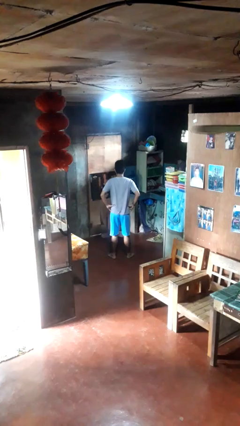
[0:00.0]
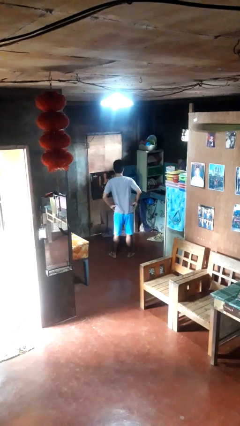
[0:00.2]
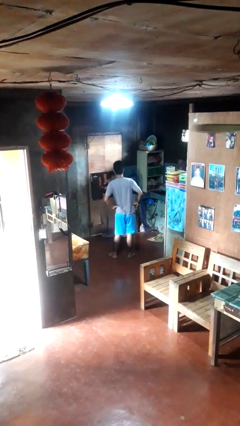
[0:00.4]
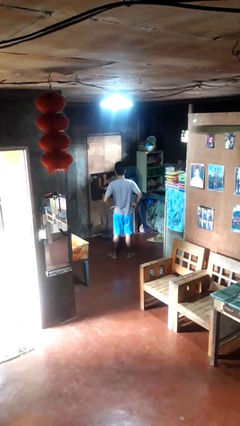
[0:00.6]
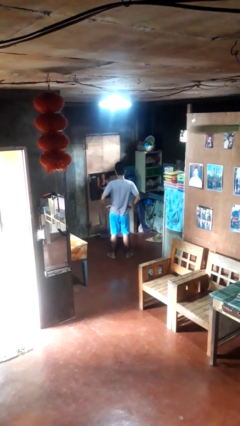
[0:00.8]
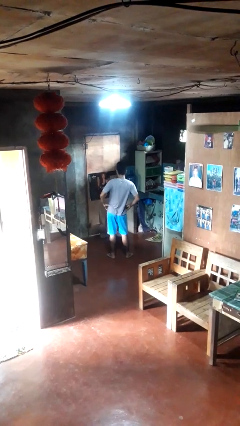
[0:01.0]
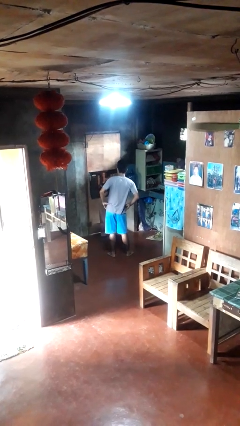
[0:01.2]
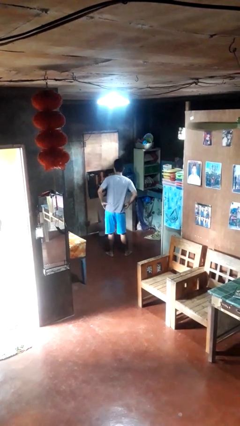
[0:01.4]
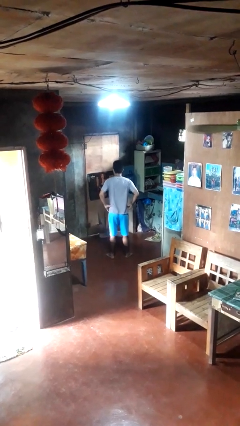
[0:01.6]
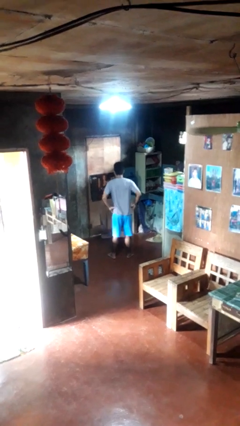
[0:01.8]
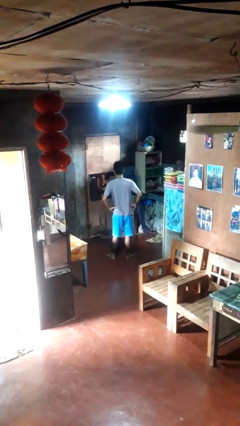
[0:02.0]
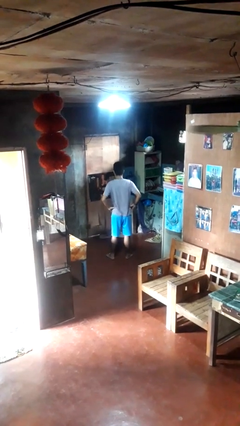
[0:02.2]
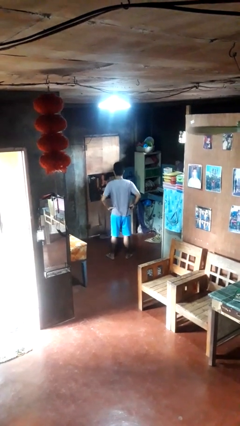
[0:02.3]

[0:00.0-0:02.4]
person wiggles hips

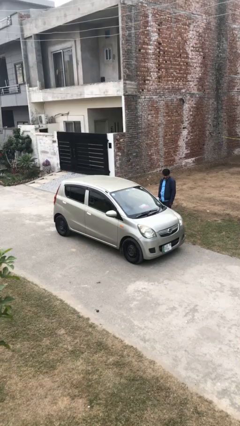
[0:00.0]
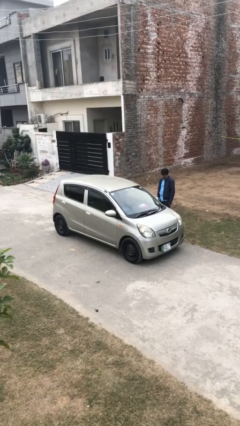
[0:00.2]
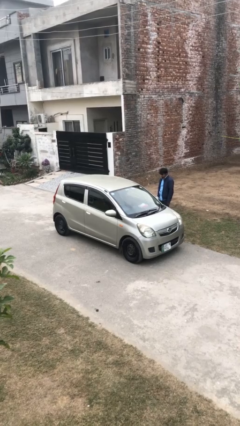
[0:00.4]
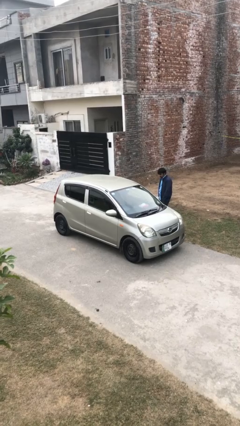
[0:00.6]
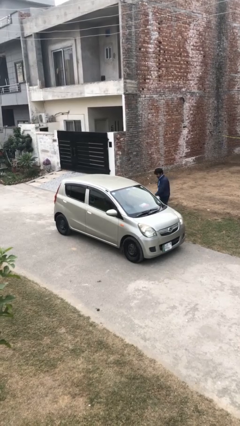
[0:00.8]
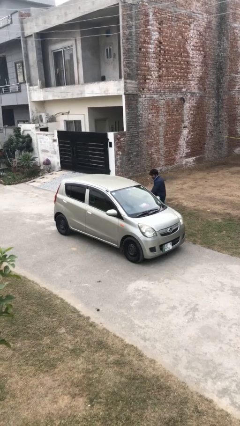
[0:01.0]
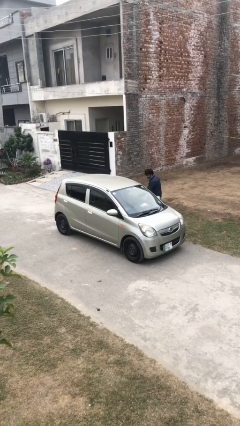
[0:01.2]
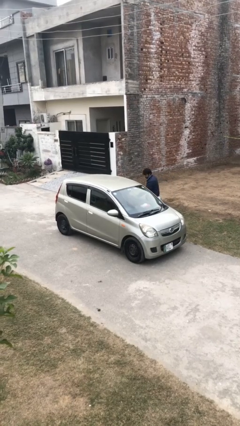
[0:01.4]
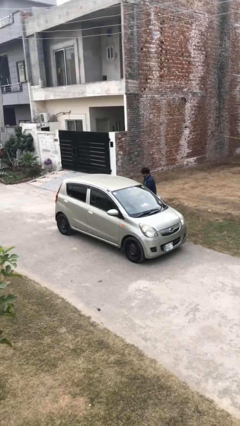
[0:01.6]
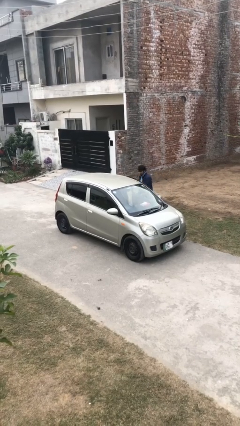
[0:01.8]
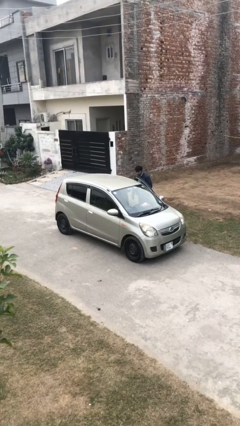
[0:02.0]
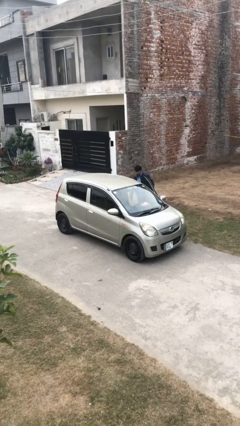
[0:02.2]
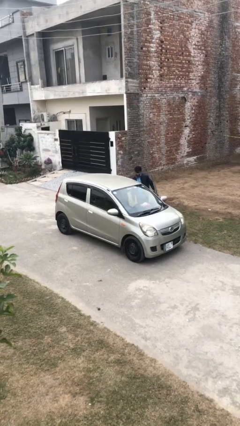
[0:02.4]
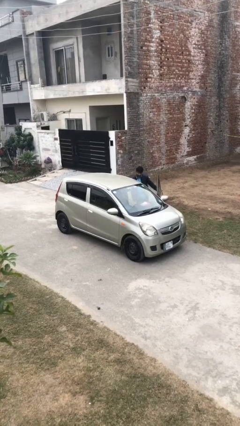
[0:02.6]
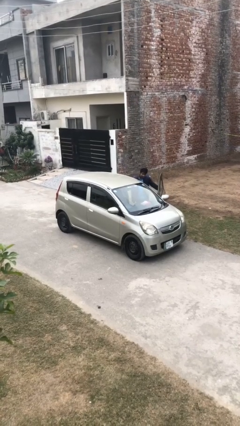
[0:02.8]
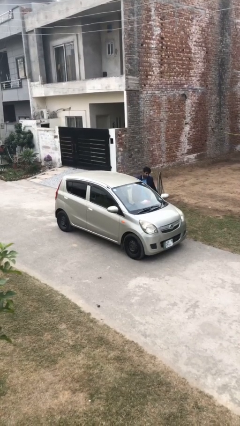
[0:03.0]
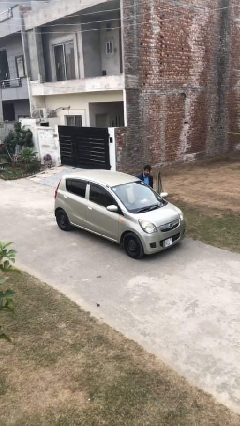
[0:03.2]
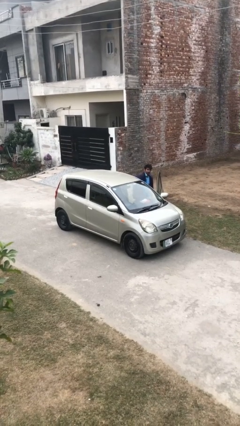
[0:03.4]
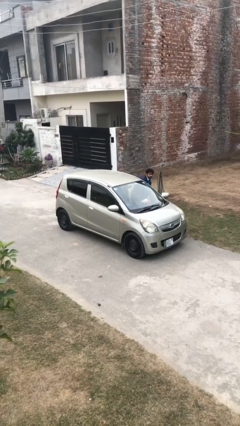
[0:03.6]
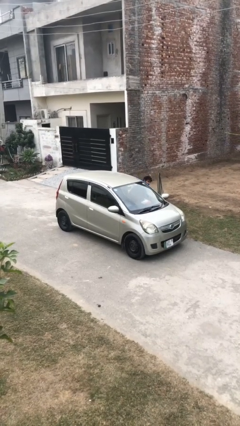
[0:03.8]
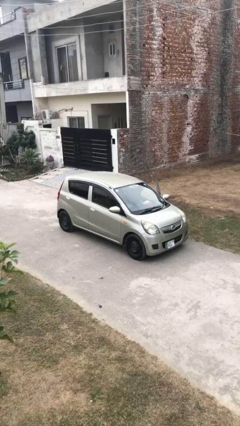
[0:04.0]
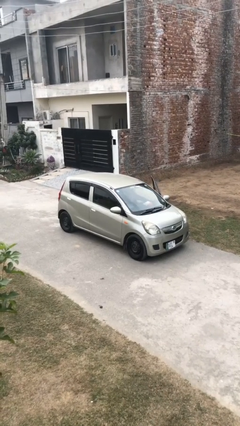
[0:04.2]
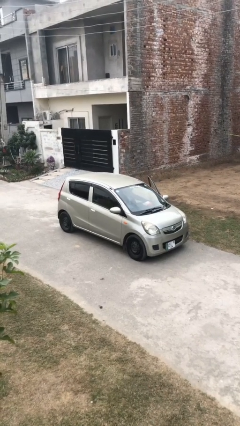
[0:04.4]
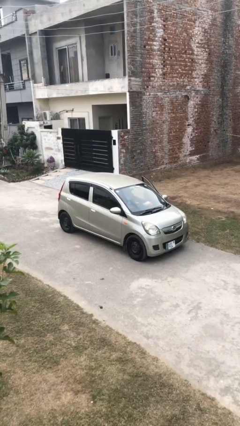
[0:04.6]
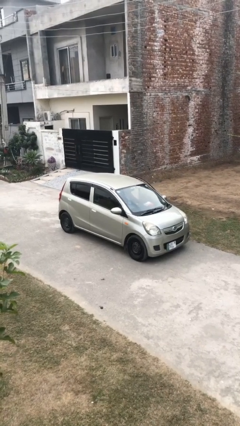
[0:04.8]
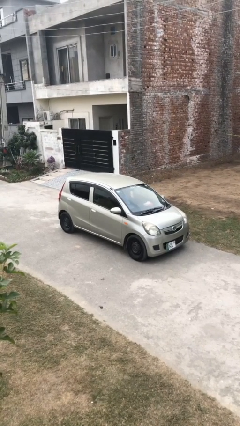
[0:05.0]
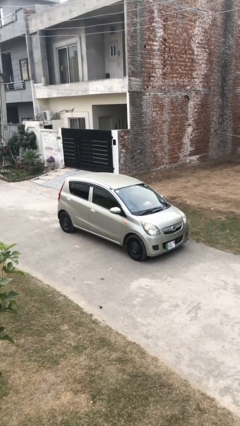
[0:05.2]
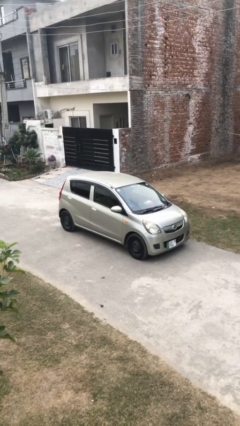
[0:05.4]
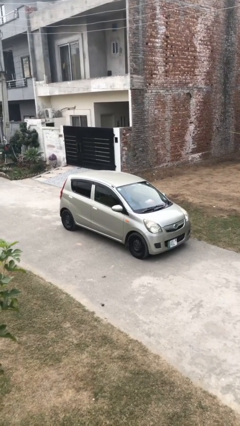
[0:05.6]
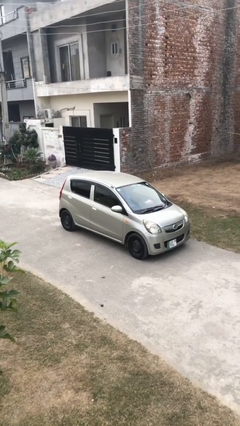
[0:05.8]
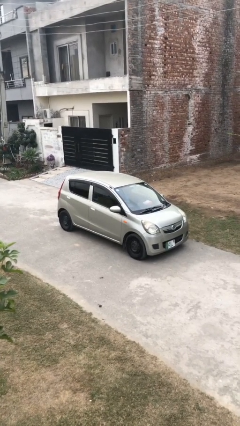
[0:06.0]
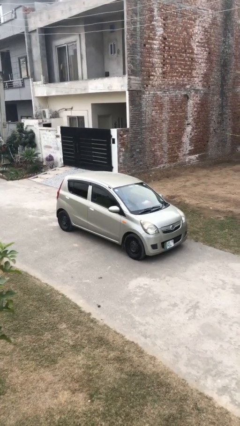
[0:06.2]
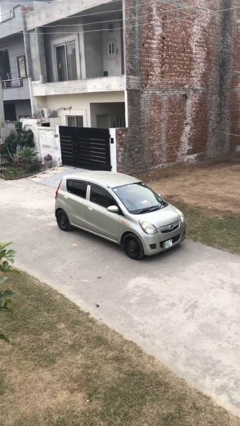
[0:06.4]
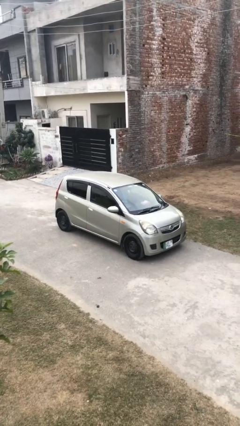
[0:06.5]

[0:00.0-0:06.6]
car picks up person

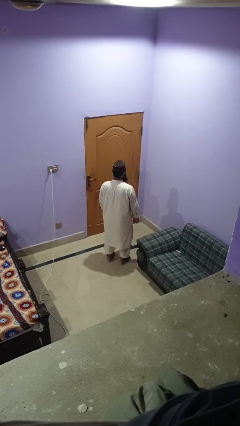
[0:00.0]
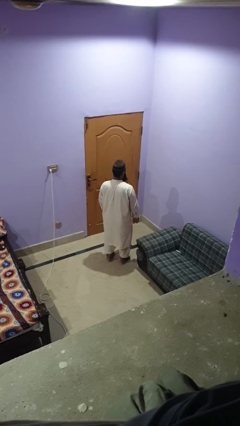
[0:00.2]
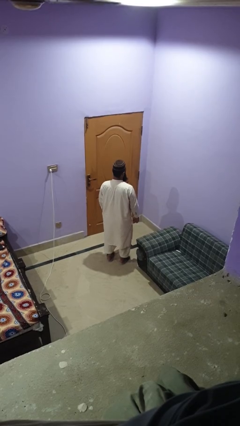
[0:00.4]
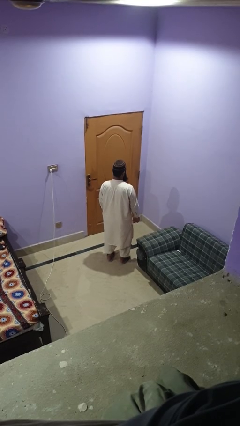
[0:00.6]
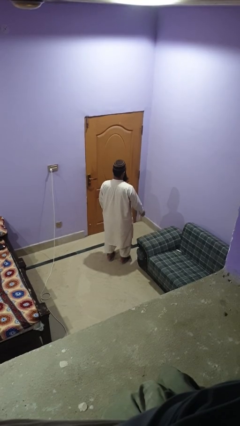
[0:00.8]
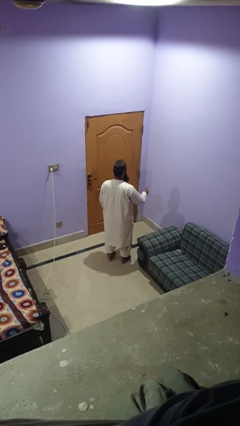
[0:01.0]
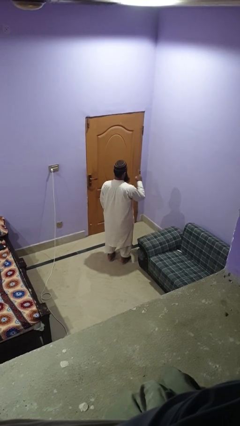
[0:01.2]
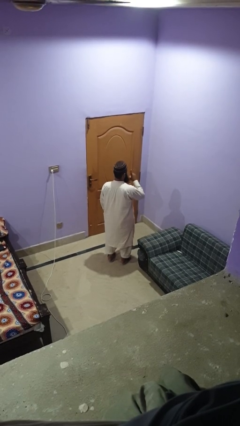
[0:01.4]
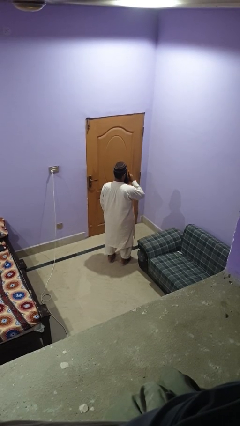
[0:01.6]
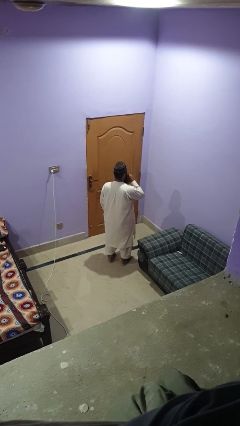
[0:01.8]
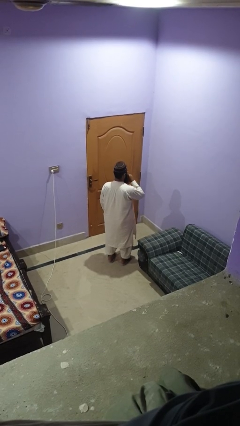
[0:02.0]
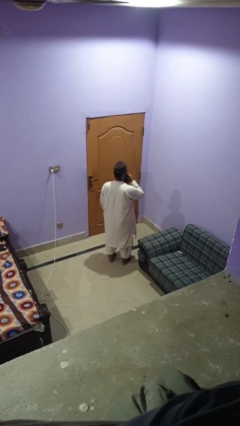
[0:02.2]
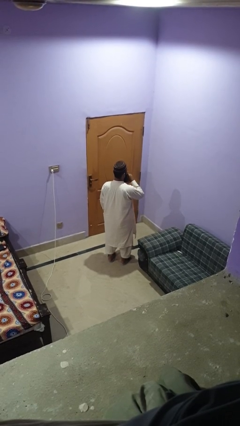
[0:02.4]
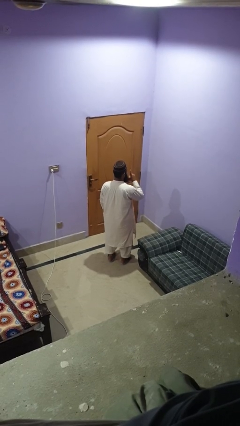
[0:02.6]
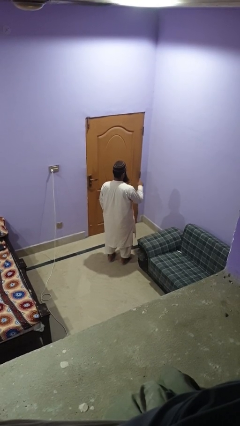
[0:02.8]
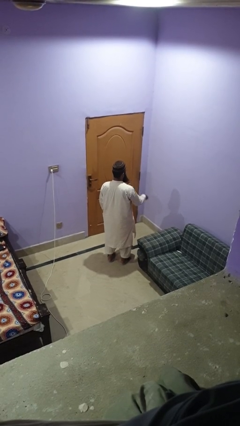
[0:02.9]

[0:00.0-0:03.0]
person gestures be quiet

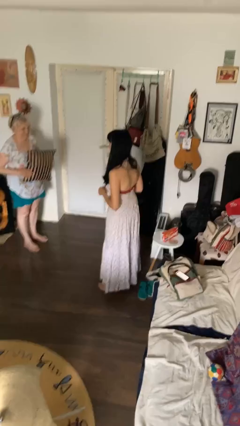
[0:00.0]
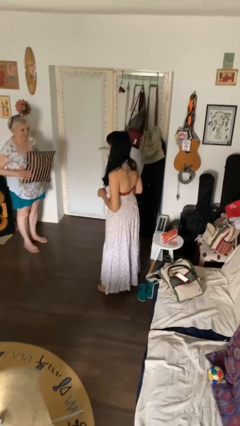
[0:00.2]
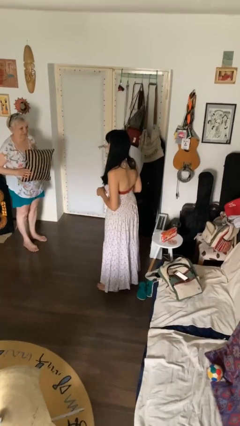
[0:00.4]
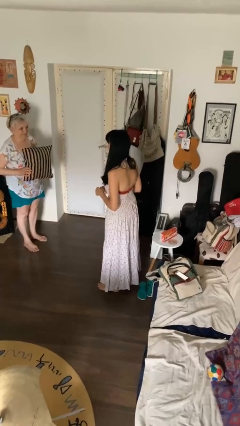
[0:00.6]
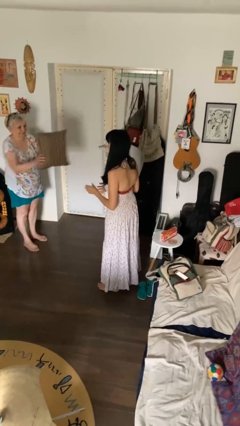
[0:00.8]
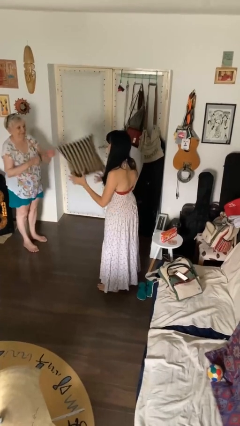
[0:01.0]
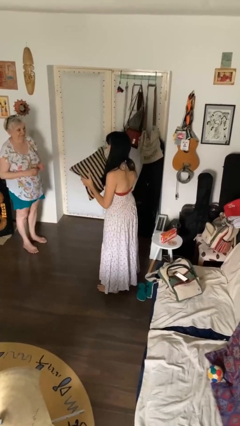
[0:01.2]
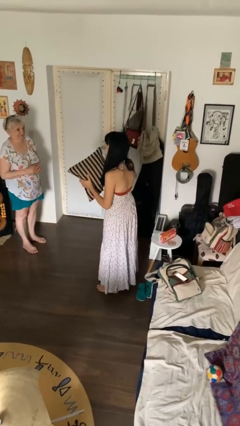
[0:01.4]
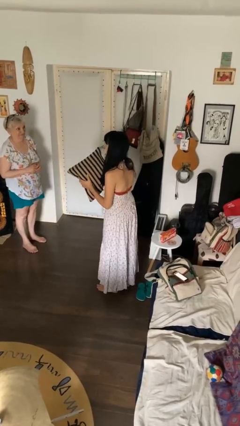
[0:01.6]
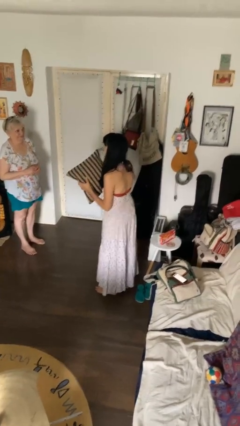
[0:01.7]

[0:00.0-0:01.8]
person catches object from person

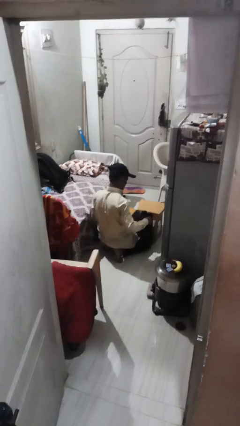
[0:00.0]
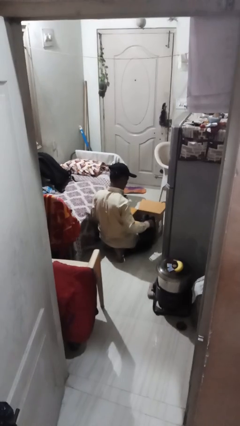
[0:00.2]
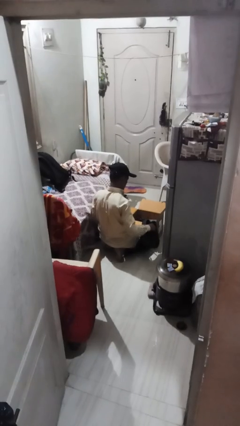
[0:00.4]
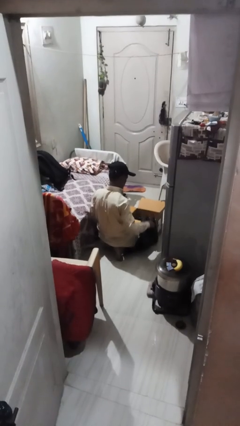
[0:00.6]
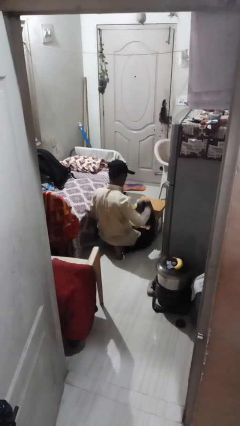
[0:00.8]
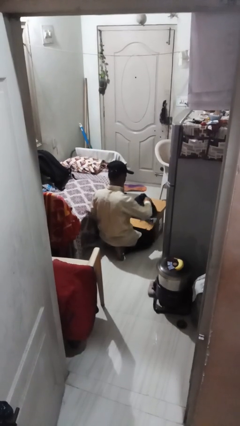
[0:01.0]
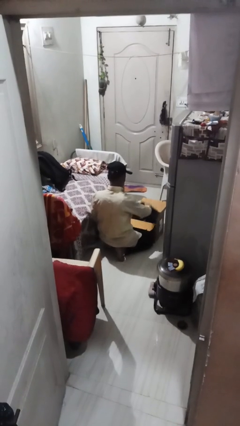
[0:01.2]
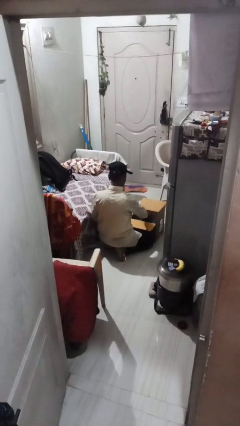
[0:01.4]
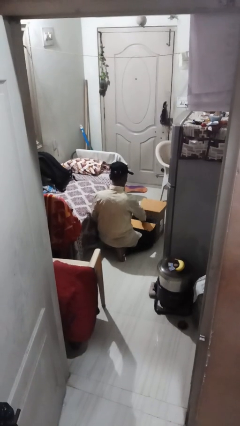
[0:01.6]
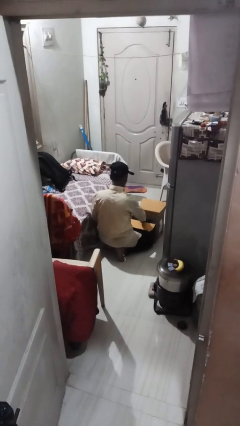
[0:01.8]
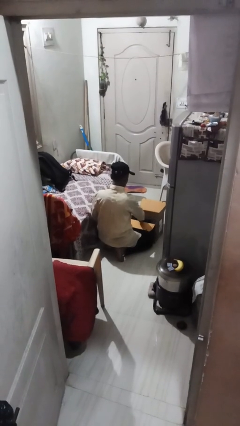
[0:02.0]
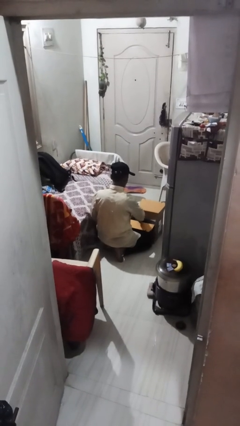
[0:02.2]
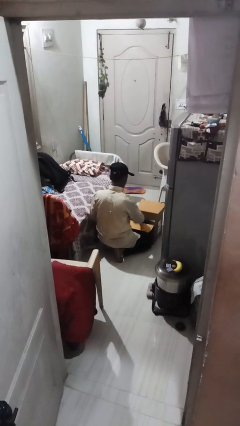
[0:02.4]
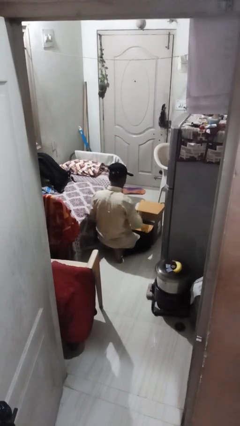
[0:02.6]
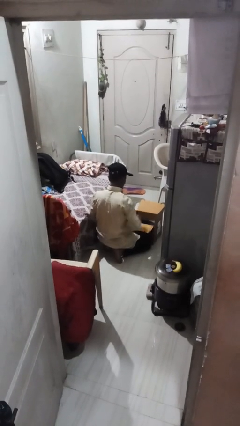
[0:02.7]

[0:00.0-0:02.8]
person puts object into box

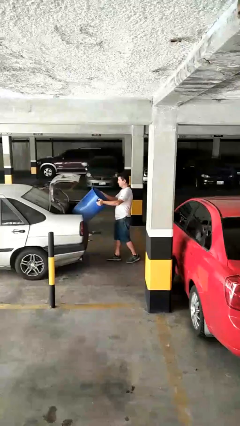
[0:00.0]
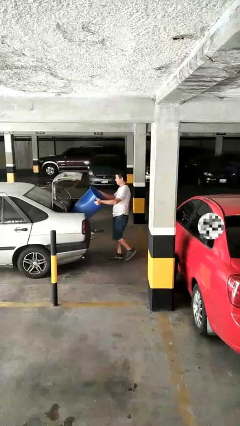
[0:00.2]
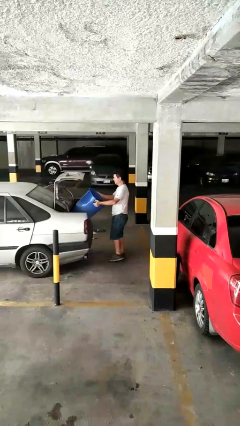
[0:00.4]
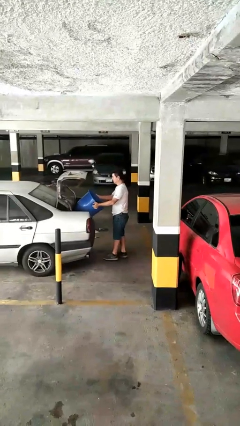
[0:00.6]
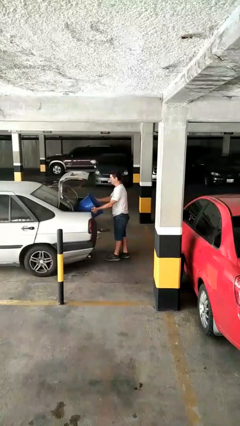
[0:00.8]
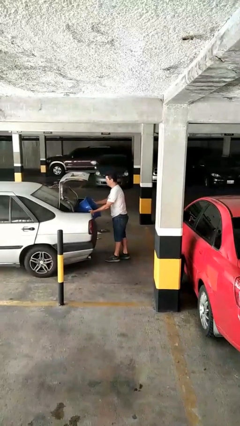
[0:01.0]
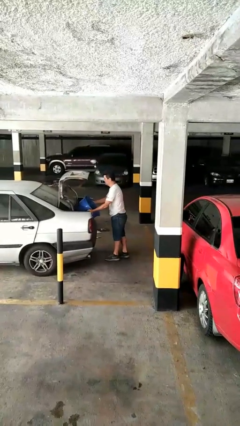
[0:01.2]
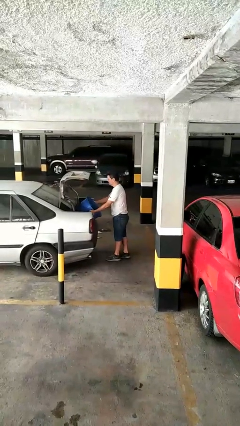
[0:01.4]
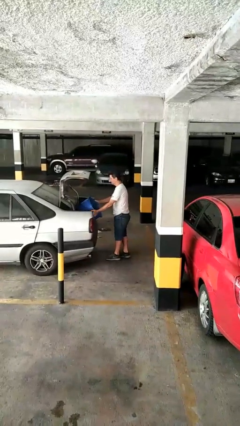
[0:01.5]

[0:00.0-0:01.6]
person loads car
